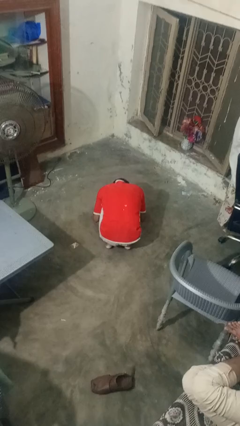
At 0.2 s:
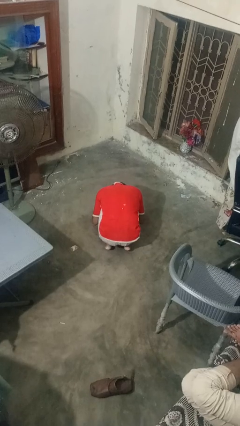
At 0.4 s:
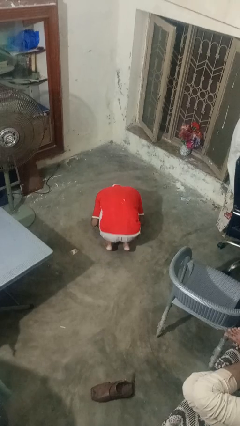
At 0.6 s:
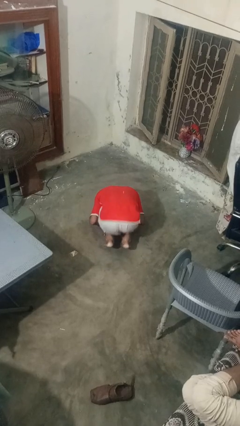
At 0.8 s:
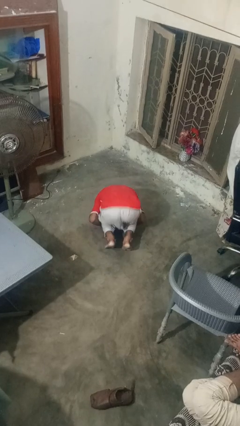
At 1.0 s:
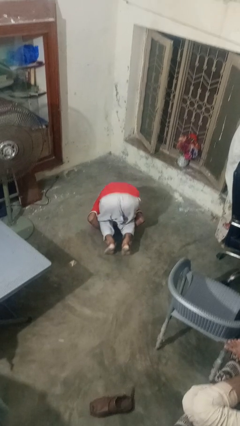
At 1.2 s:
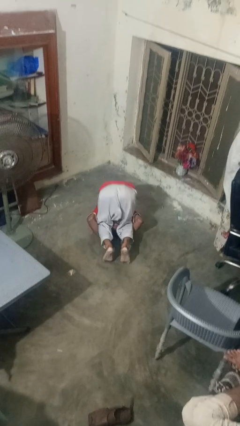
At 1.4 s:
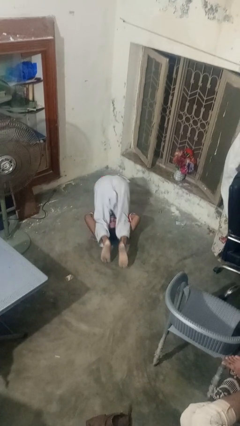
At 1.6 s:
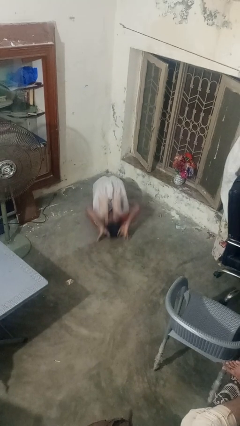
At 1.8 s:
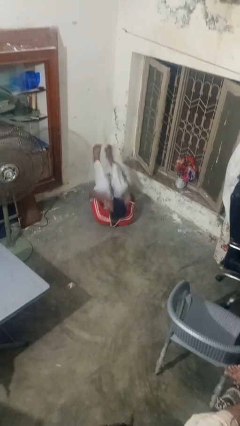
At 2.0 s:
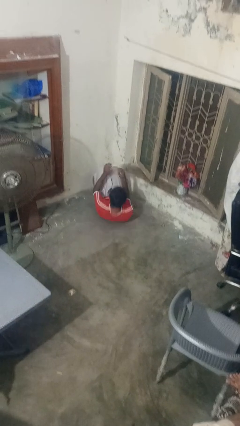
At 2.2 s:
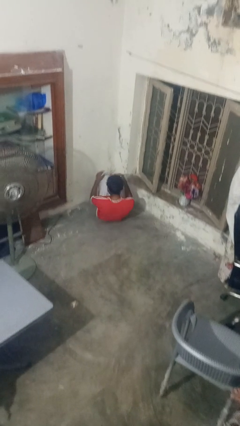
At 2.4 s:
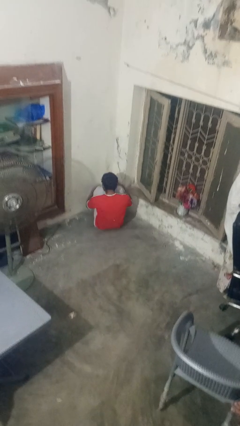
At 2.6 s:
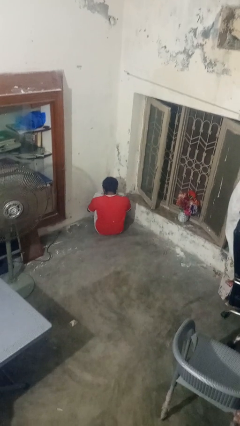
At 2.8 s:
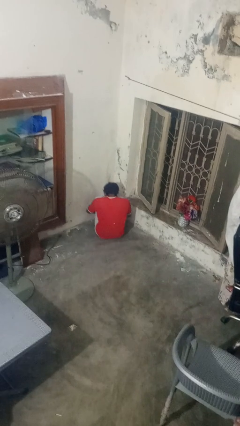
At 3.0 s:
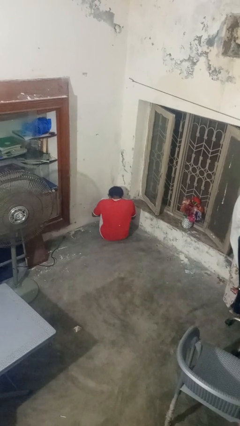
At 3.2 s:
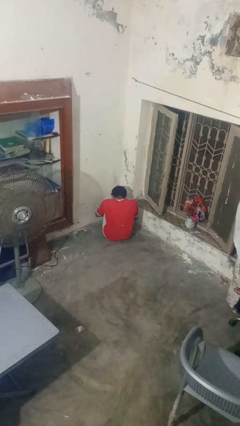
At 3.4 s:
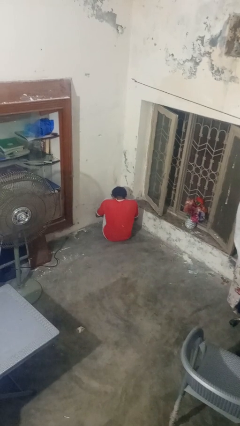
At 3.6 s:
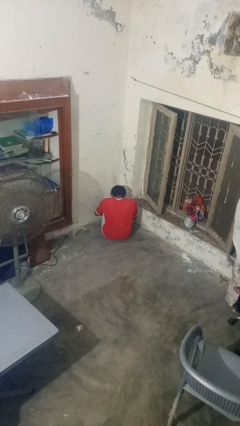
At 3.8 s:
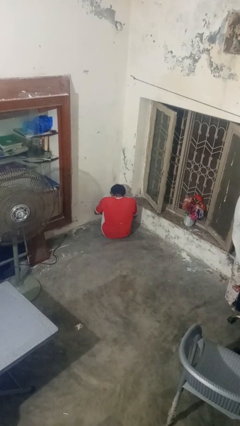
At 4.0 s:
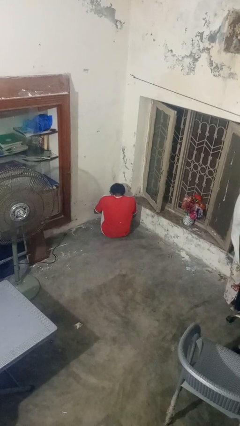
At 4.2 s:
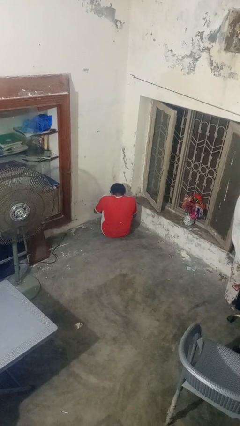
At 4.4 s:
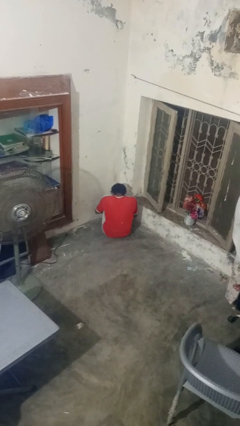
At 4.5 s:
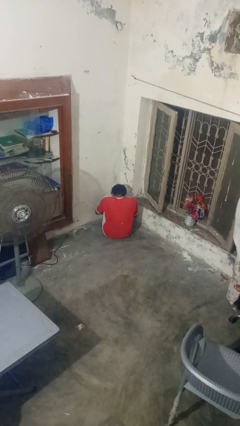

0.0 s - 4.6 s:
person somersaults

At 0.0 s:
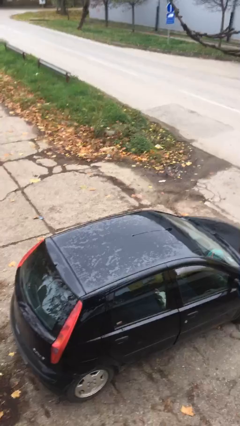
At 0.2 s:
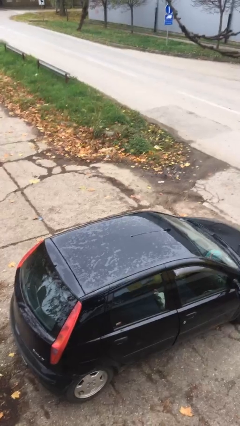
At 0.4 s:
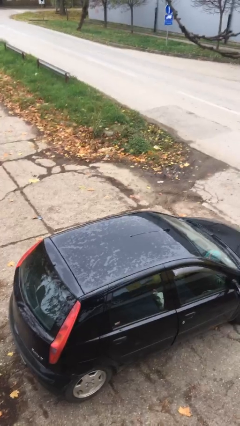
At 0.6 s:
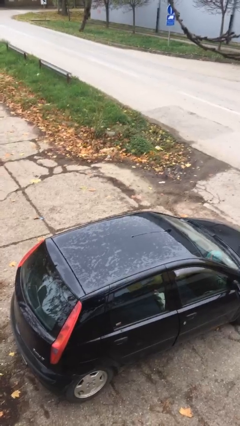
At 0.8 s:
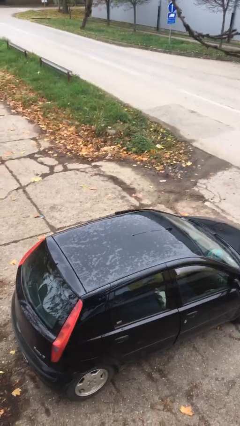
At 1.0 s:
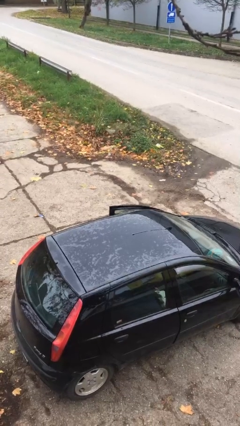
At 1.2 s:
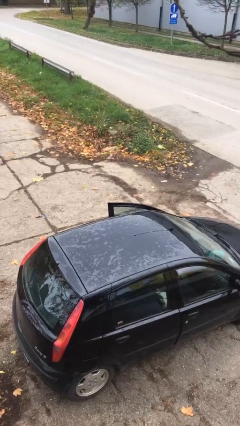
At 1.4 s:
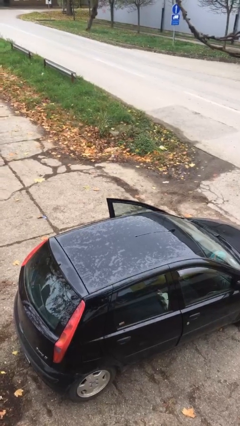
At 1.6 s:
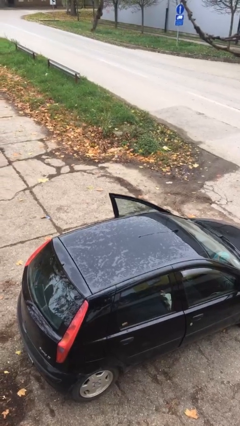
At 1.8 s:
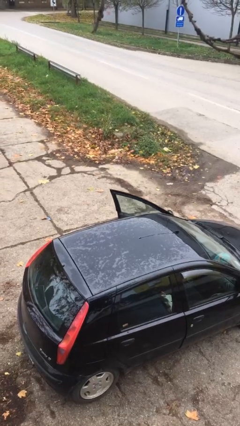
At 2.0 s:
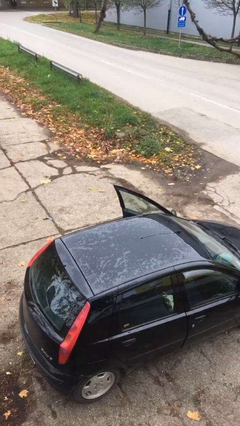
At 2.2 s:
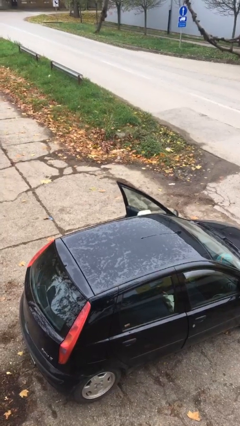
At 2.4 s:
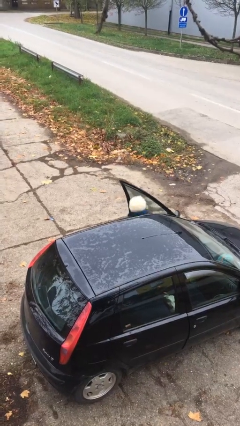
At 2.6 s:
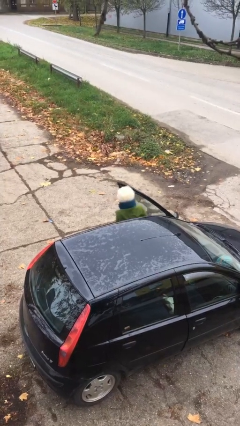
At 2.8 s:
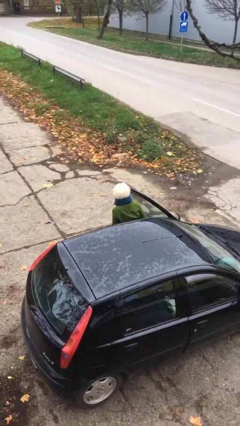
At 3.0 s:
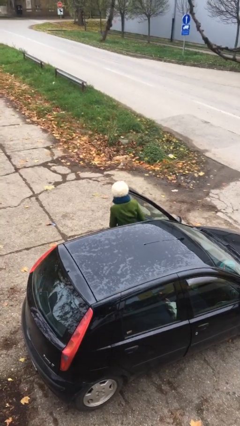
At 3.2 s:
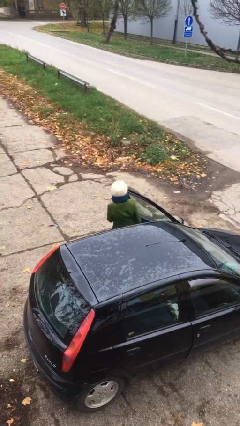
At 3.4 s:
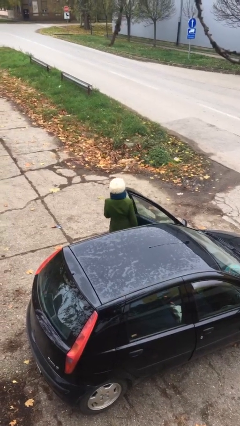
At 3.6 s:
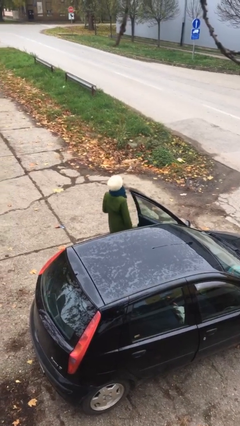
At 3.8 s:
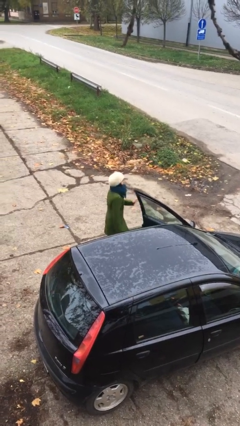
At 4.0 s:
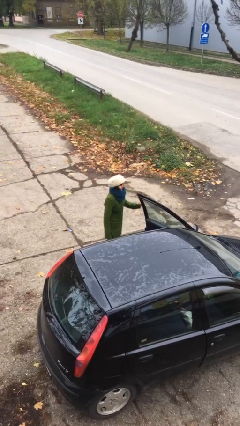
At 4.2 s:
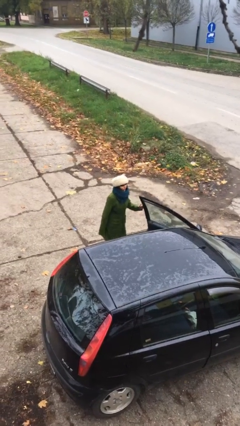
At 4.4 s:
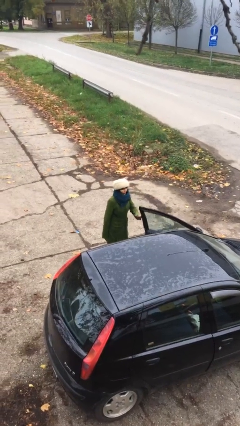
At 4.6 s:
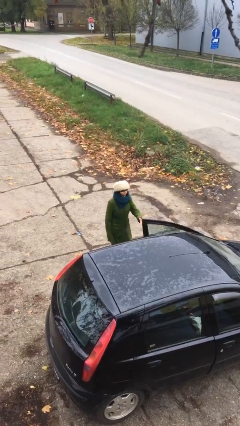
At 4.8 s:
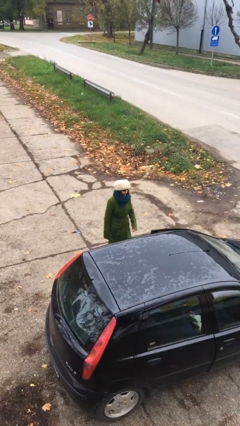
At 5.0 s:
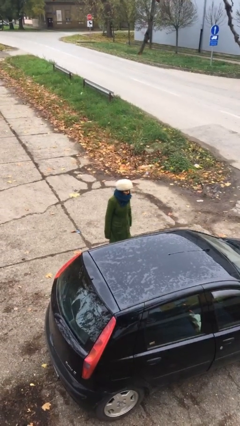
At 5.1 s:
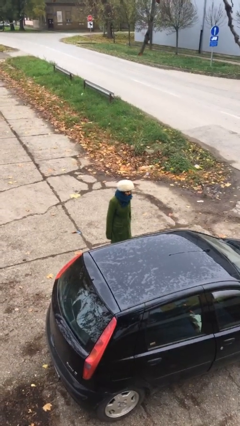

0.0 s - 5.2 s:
person exits car

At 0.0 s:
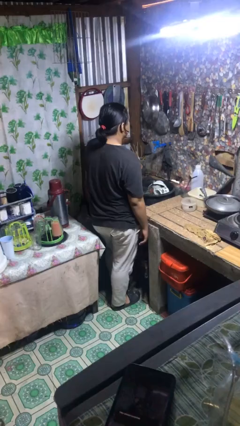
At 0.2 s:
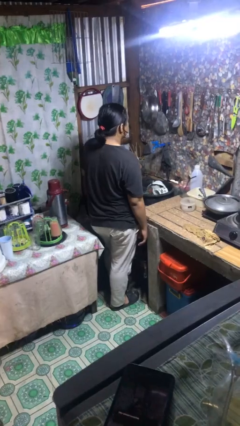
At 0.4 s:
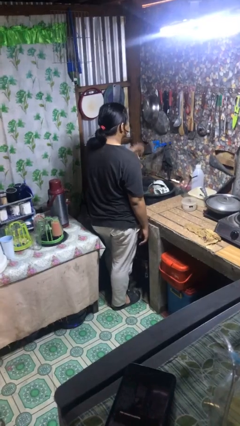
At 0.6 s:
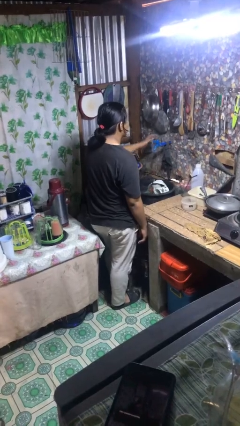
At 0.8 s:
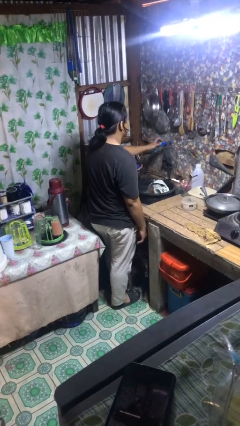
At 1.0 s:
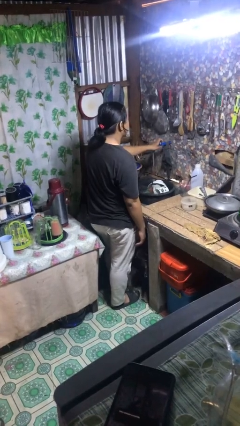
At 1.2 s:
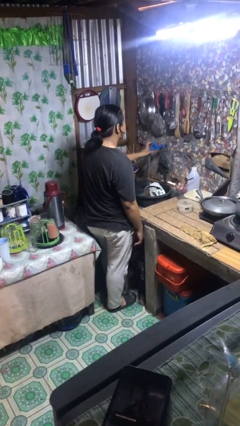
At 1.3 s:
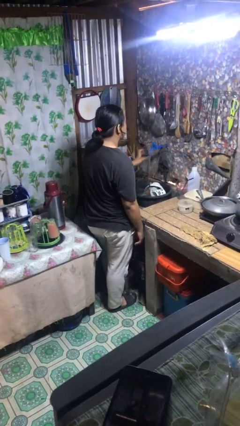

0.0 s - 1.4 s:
person turns on faucet

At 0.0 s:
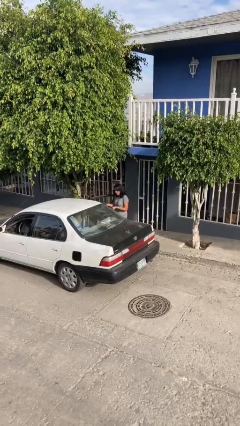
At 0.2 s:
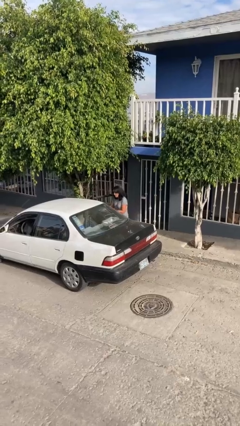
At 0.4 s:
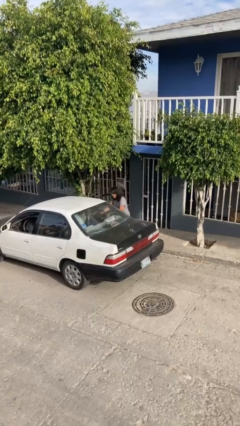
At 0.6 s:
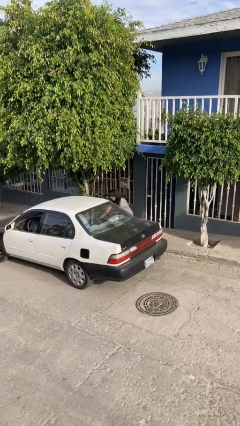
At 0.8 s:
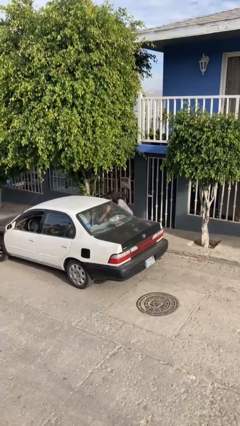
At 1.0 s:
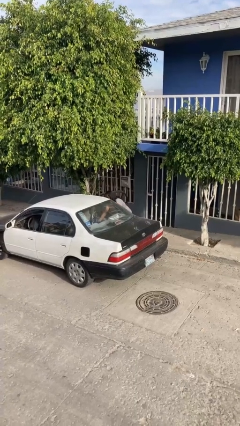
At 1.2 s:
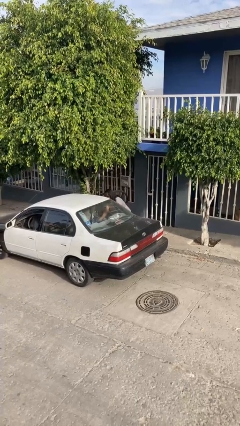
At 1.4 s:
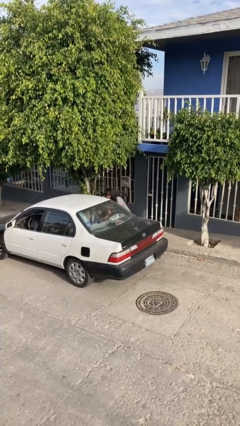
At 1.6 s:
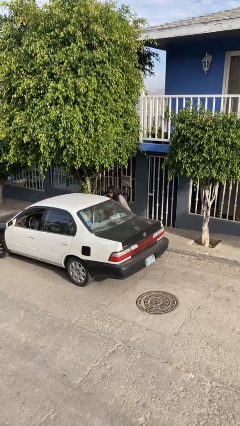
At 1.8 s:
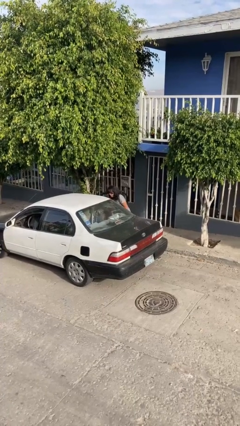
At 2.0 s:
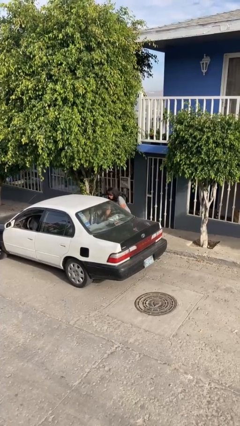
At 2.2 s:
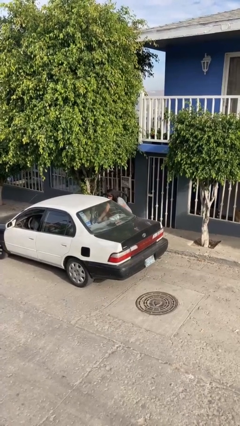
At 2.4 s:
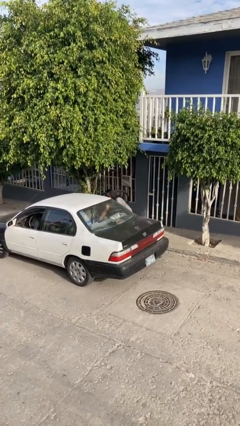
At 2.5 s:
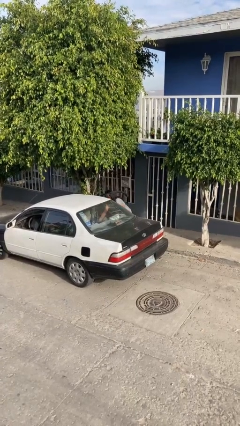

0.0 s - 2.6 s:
person loads car

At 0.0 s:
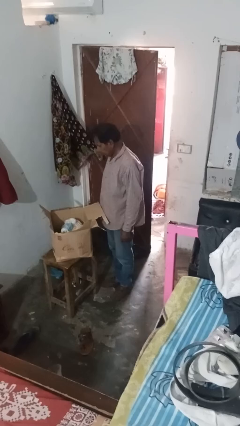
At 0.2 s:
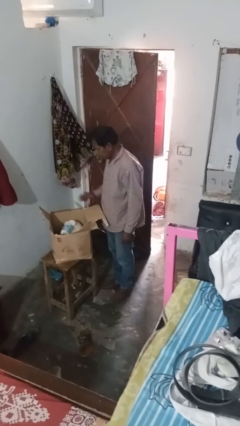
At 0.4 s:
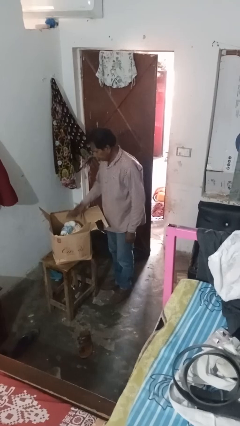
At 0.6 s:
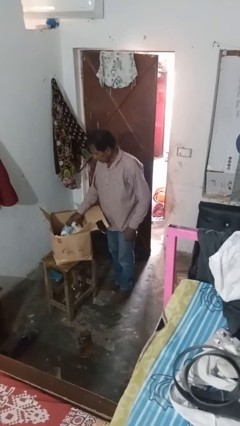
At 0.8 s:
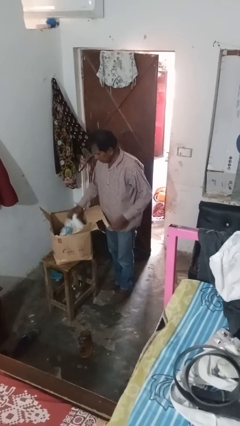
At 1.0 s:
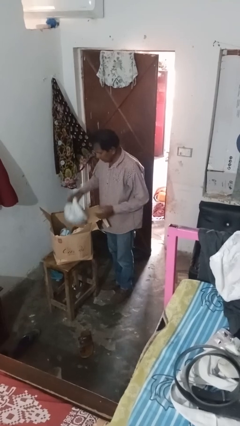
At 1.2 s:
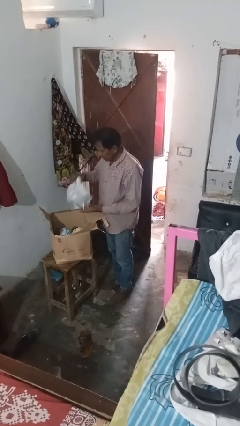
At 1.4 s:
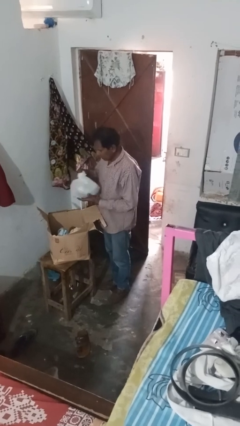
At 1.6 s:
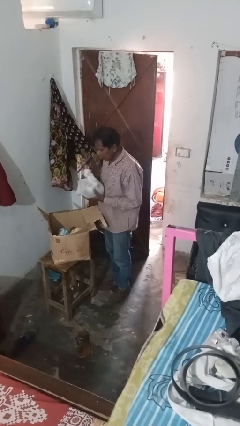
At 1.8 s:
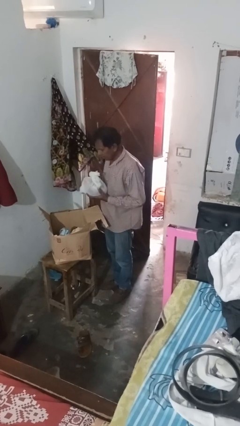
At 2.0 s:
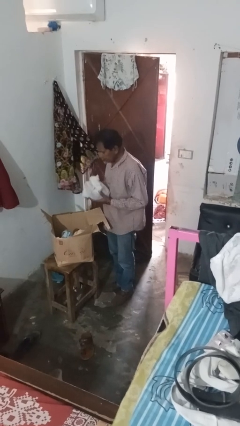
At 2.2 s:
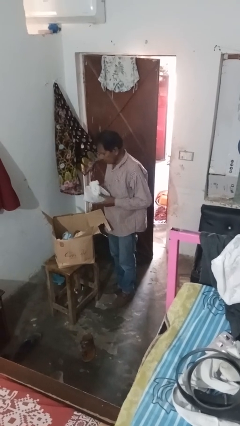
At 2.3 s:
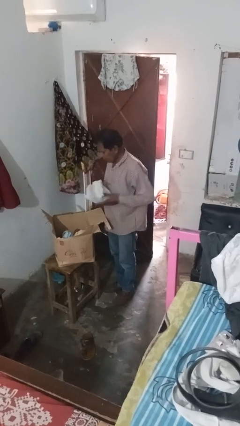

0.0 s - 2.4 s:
person takes object from box

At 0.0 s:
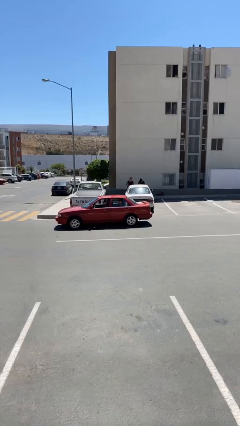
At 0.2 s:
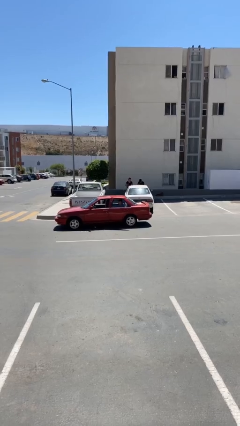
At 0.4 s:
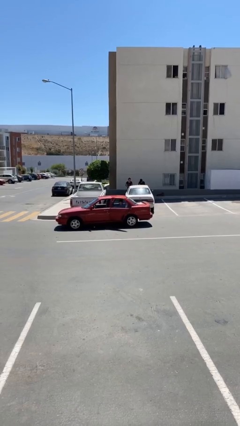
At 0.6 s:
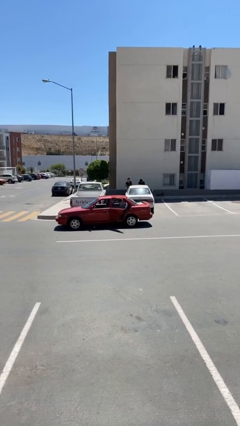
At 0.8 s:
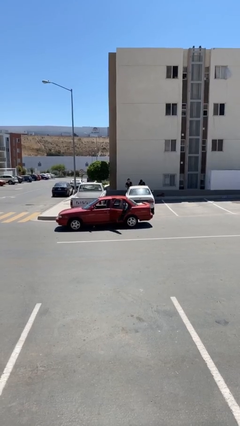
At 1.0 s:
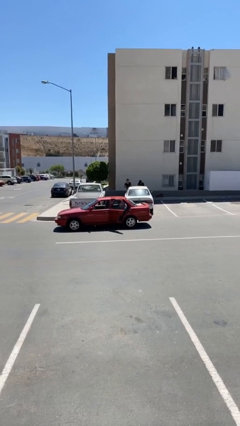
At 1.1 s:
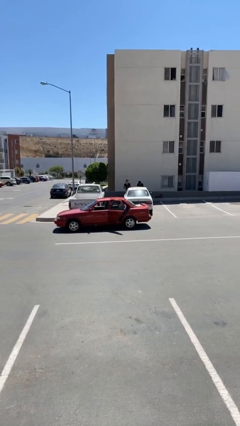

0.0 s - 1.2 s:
person opens car door
